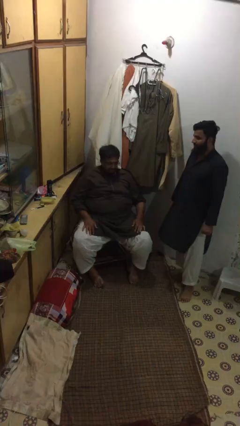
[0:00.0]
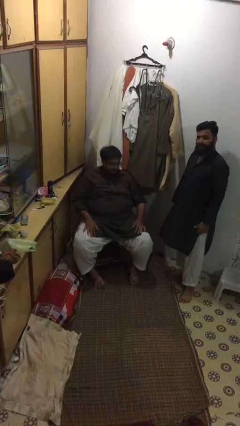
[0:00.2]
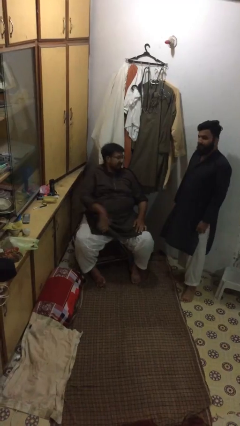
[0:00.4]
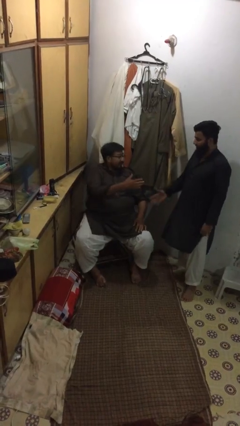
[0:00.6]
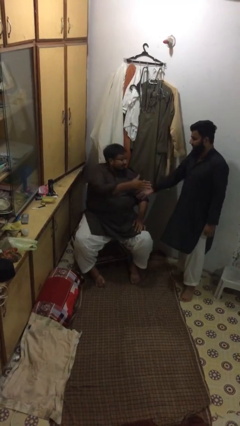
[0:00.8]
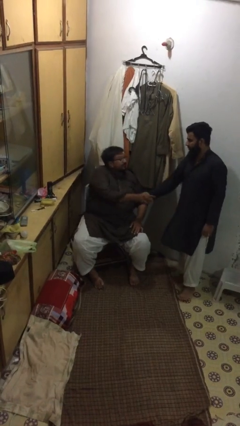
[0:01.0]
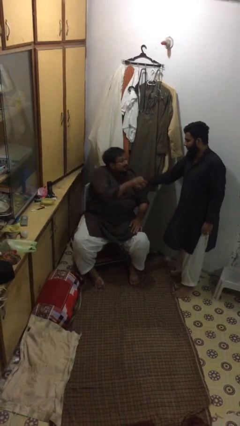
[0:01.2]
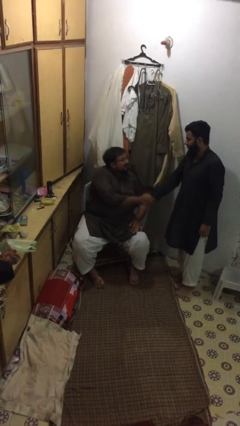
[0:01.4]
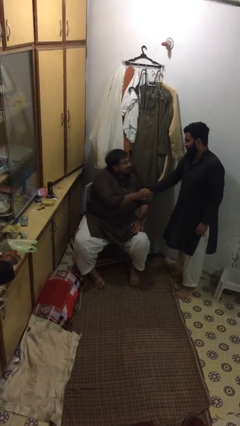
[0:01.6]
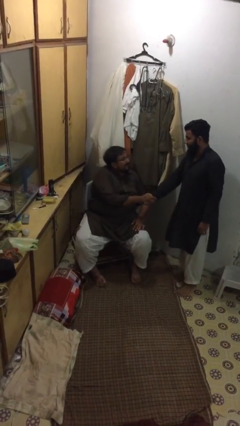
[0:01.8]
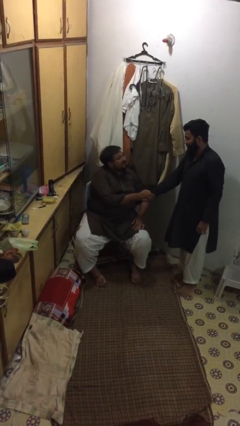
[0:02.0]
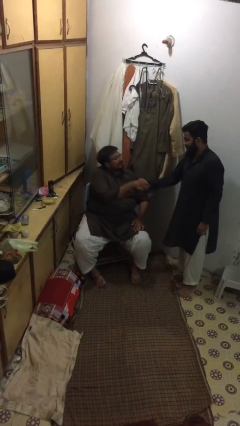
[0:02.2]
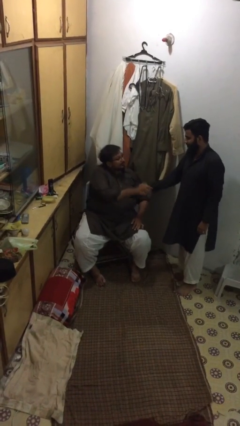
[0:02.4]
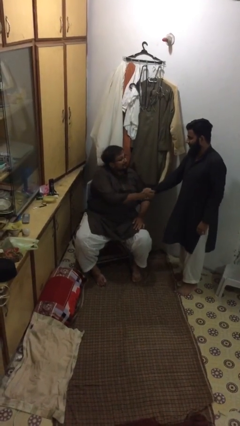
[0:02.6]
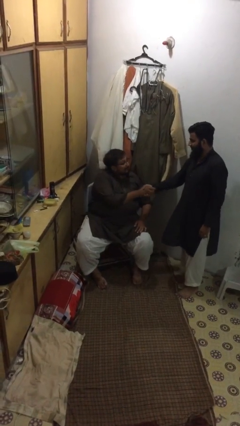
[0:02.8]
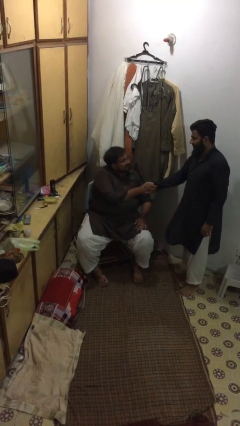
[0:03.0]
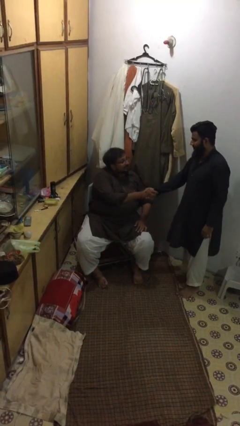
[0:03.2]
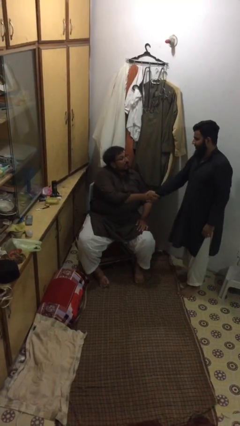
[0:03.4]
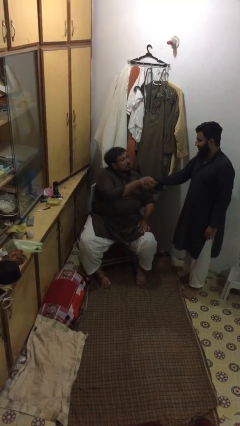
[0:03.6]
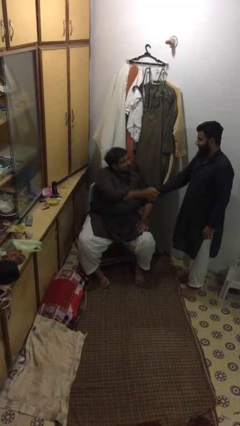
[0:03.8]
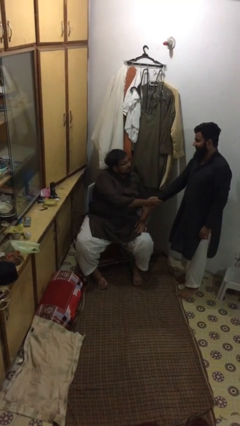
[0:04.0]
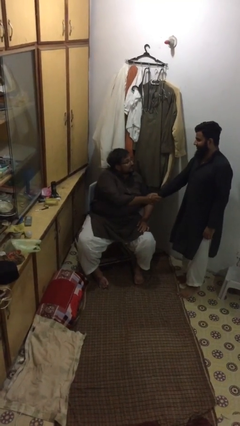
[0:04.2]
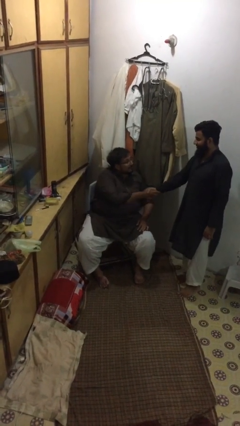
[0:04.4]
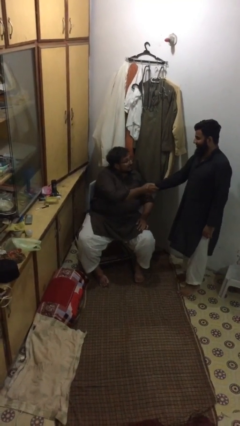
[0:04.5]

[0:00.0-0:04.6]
person shakes hand

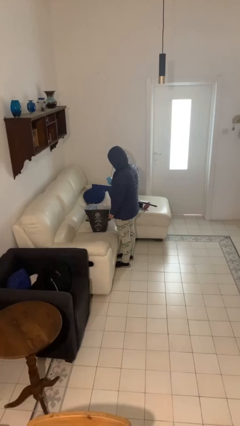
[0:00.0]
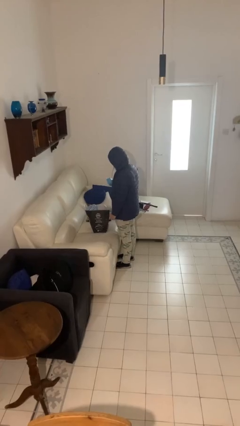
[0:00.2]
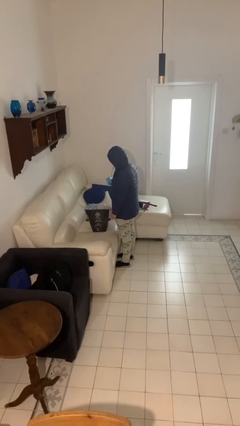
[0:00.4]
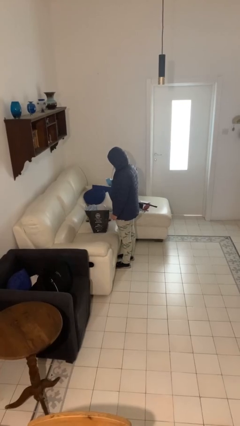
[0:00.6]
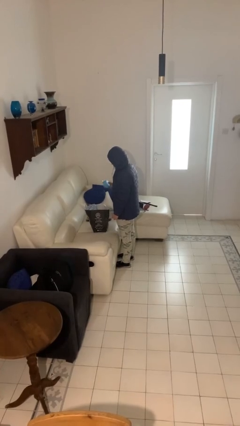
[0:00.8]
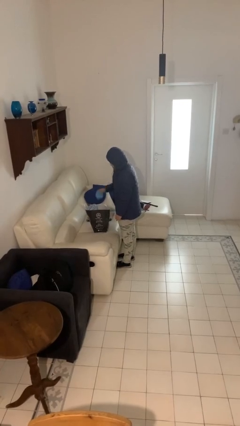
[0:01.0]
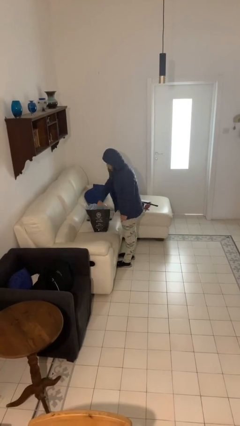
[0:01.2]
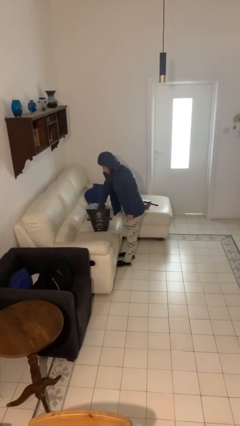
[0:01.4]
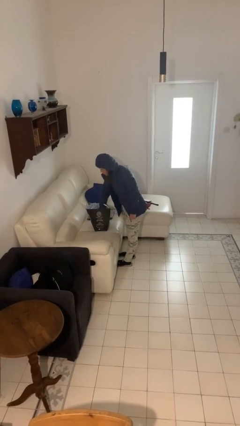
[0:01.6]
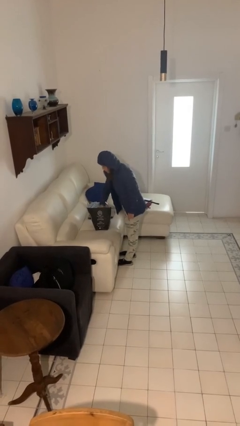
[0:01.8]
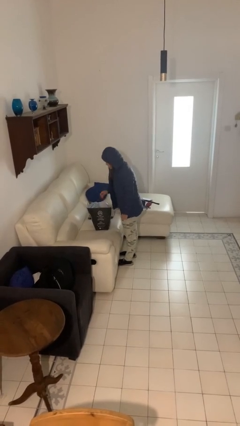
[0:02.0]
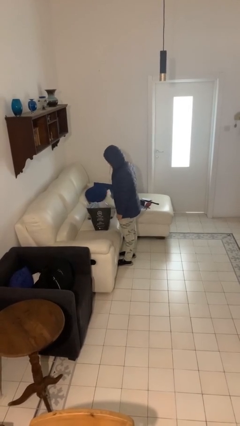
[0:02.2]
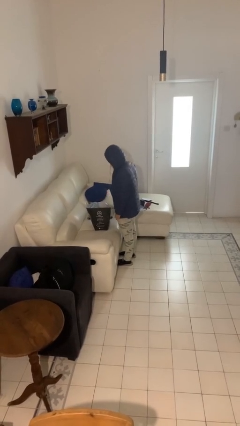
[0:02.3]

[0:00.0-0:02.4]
person puts object into bag

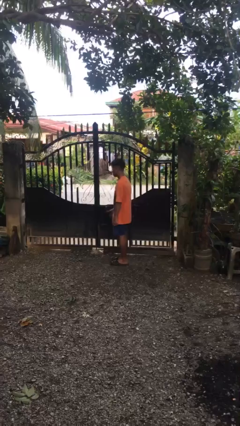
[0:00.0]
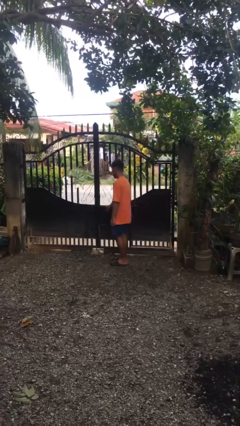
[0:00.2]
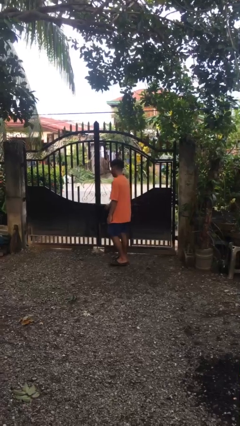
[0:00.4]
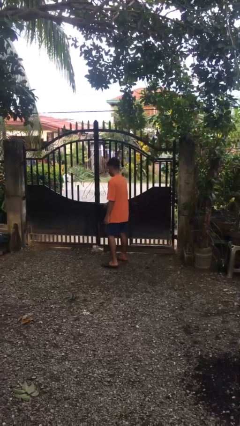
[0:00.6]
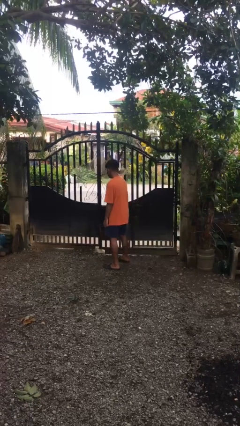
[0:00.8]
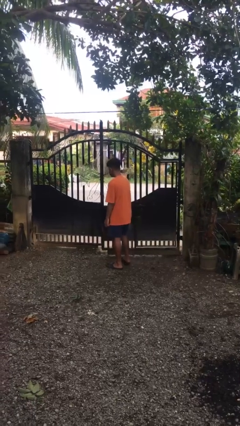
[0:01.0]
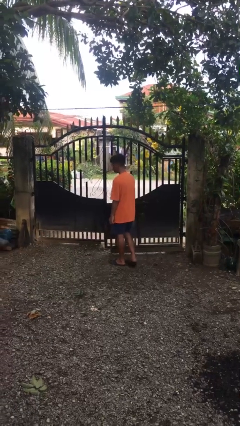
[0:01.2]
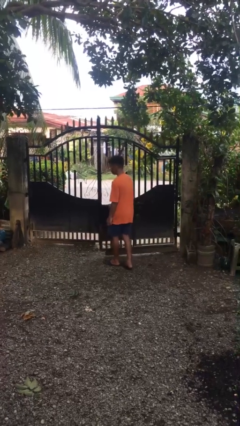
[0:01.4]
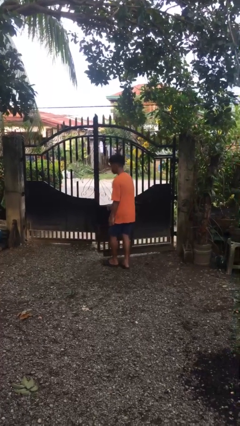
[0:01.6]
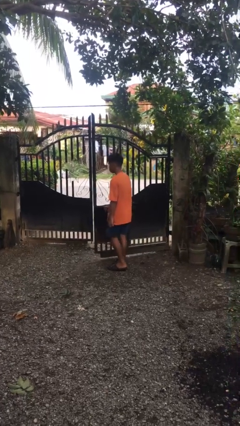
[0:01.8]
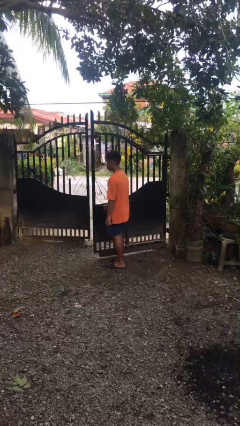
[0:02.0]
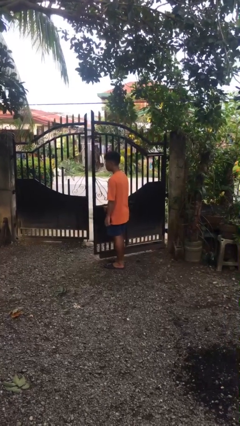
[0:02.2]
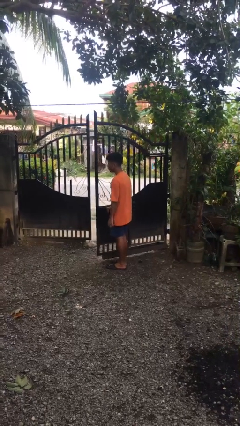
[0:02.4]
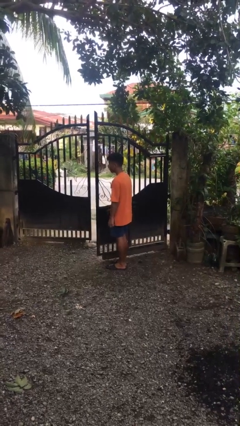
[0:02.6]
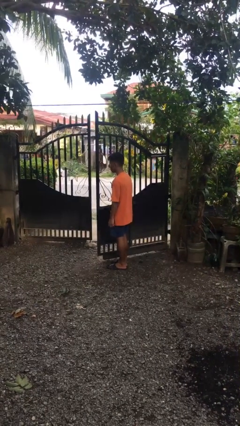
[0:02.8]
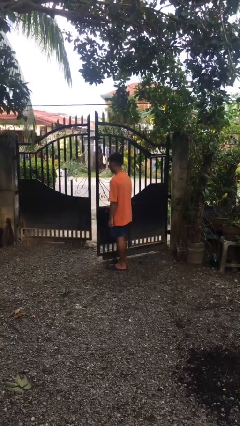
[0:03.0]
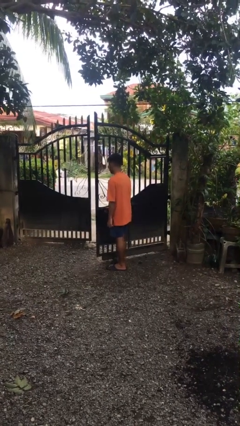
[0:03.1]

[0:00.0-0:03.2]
person opens gate

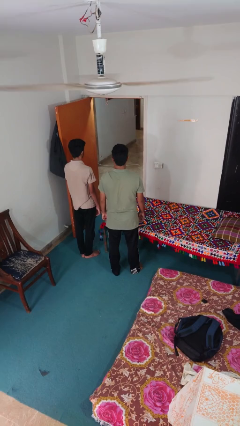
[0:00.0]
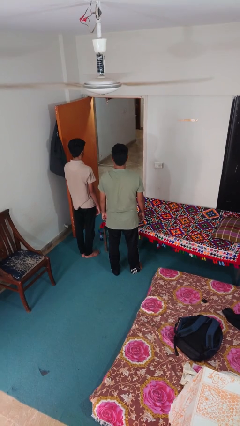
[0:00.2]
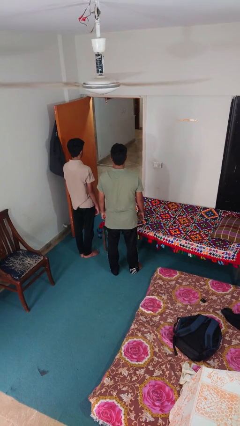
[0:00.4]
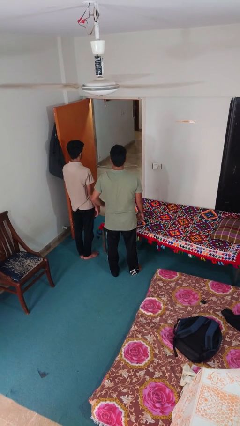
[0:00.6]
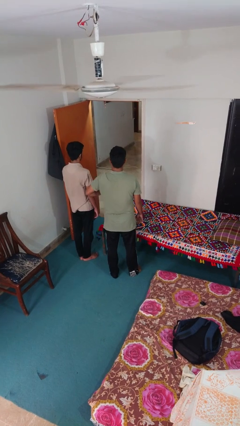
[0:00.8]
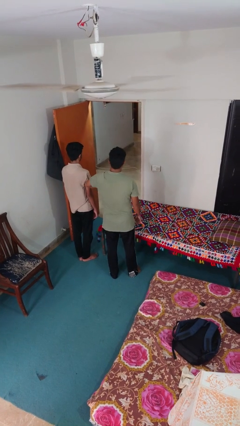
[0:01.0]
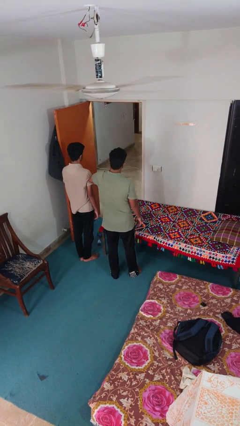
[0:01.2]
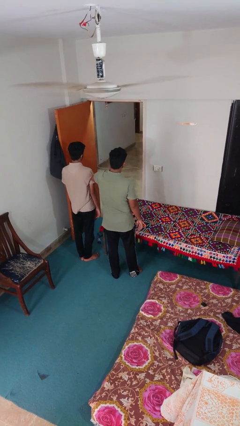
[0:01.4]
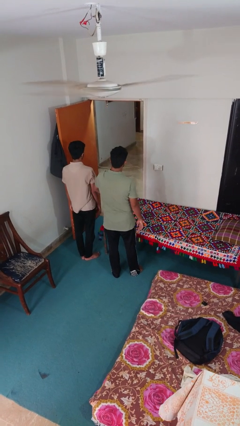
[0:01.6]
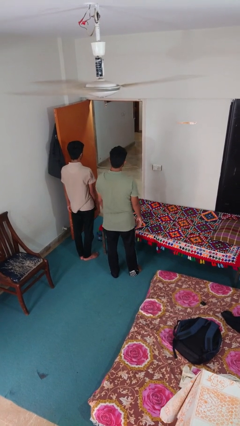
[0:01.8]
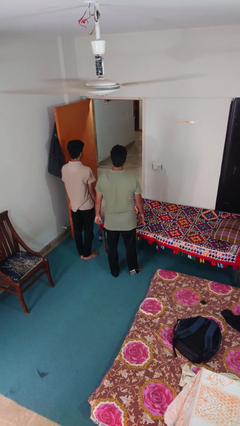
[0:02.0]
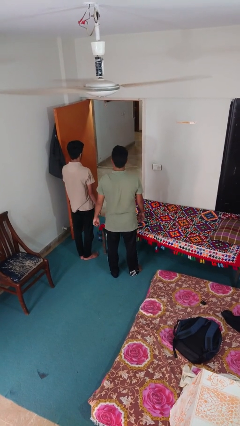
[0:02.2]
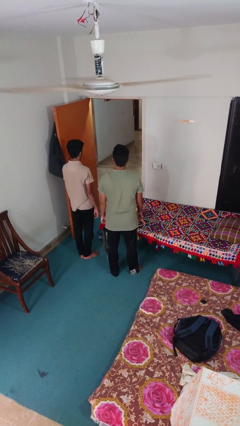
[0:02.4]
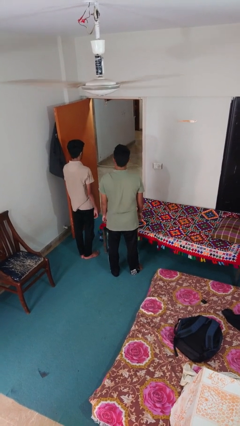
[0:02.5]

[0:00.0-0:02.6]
person nudges person with elbow

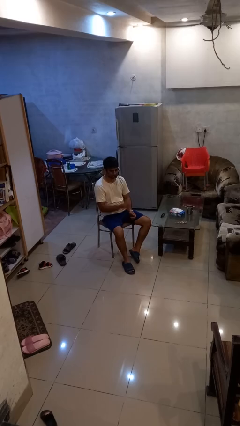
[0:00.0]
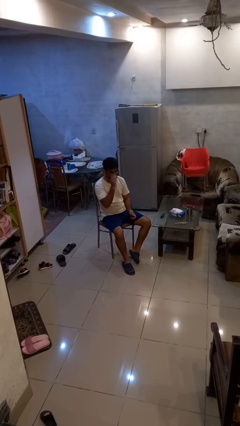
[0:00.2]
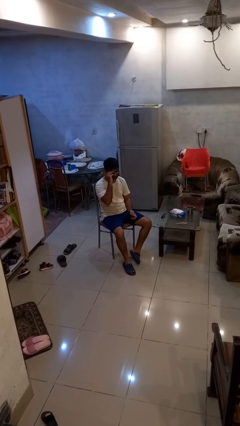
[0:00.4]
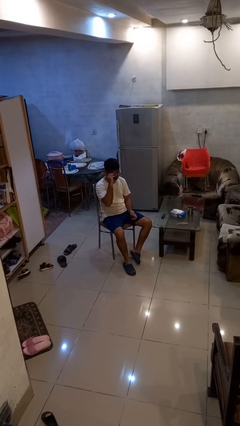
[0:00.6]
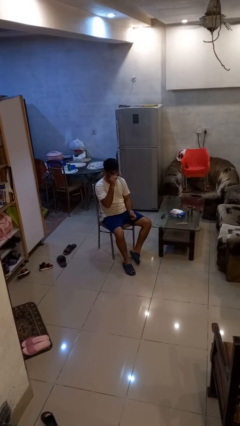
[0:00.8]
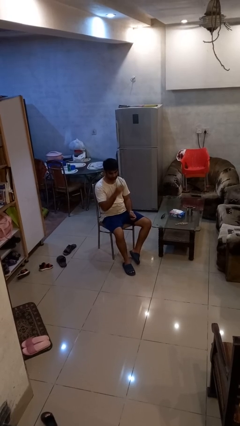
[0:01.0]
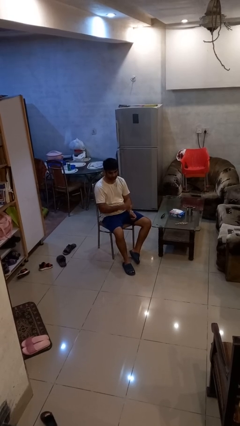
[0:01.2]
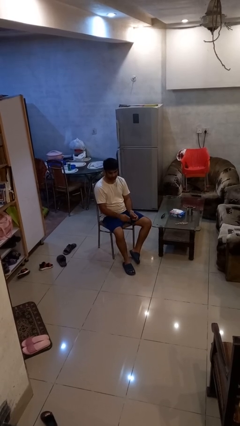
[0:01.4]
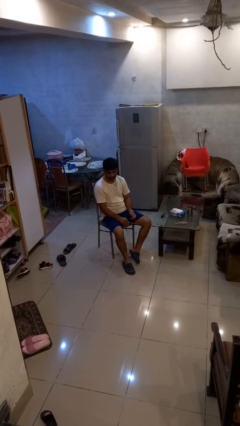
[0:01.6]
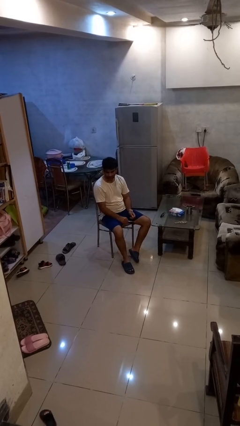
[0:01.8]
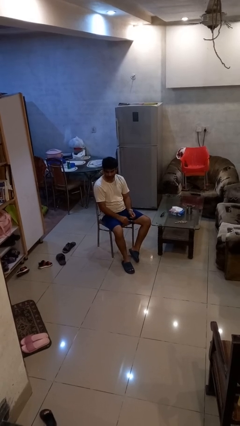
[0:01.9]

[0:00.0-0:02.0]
person takes off glasses

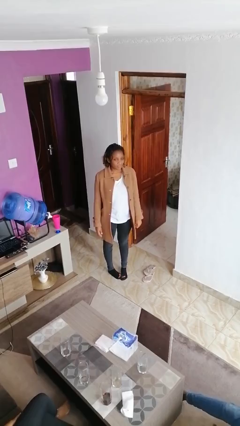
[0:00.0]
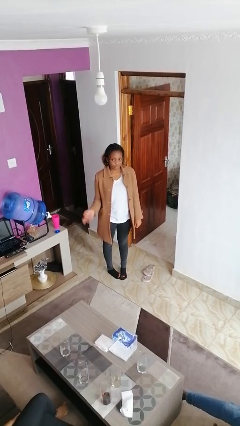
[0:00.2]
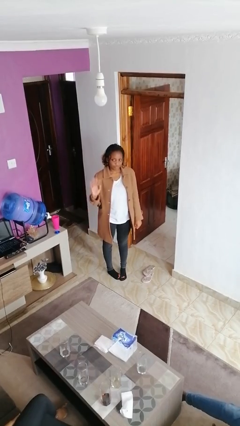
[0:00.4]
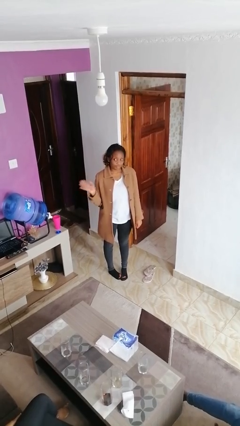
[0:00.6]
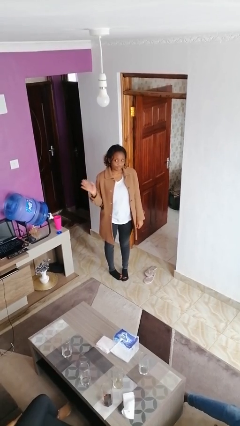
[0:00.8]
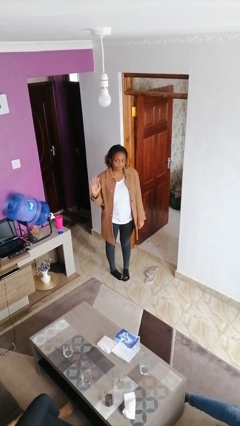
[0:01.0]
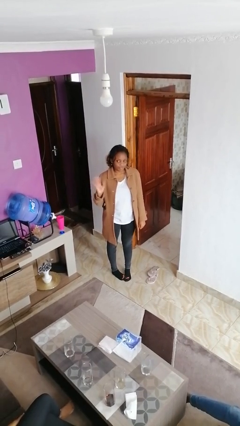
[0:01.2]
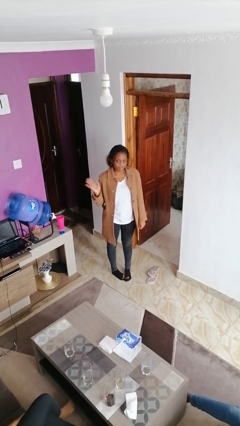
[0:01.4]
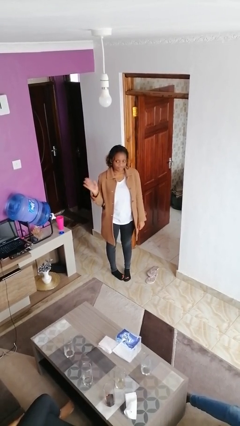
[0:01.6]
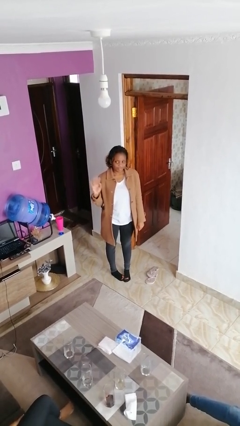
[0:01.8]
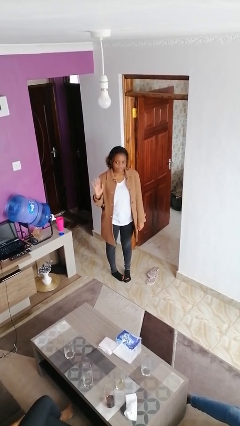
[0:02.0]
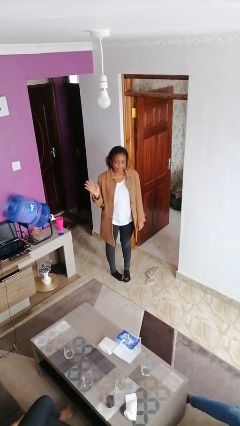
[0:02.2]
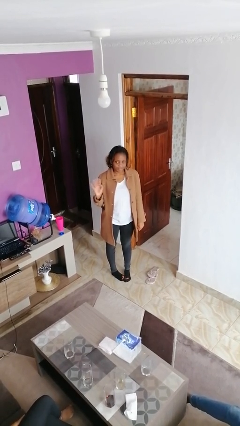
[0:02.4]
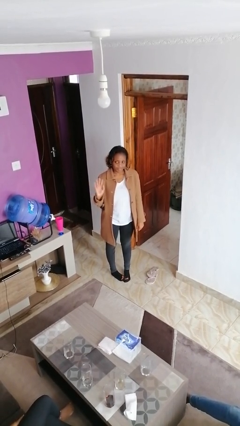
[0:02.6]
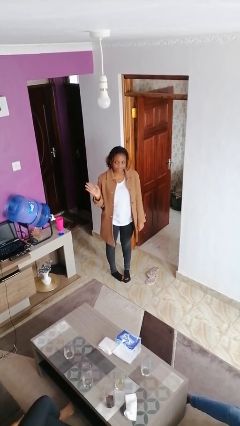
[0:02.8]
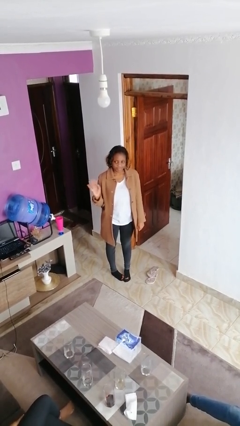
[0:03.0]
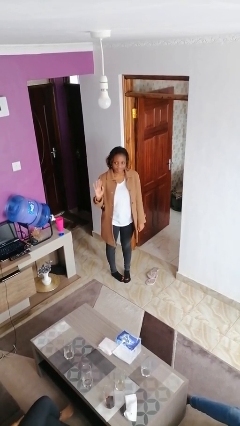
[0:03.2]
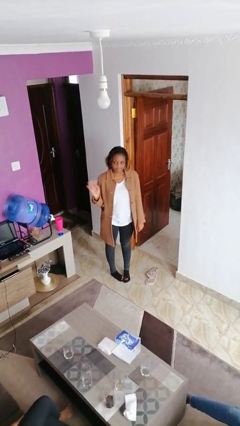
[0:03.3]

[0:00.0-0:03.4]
person waves at person
